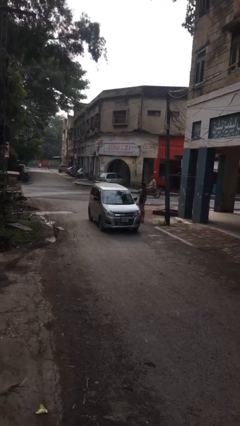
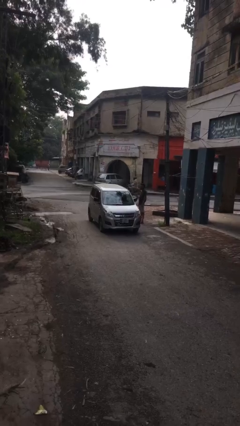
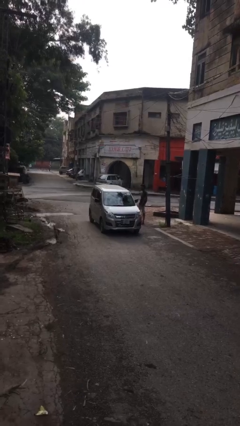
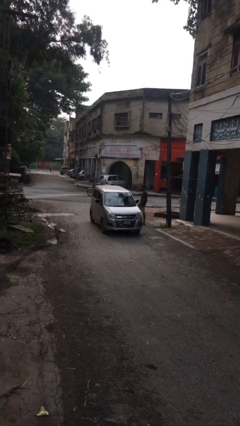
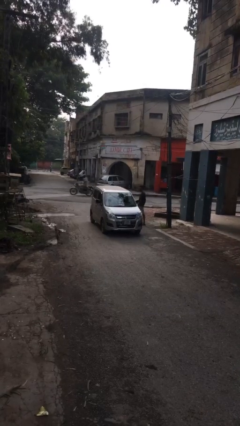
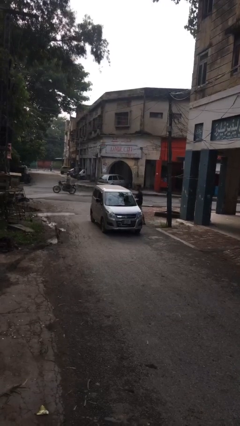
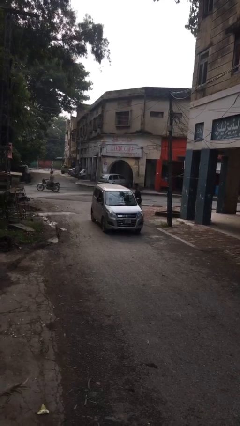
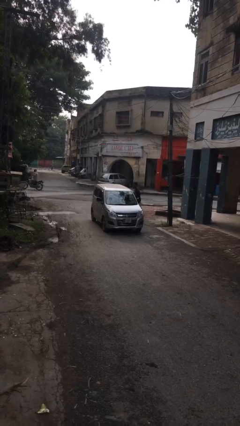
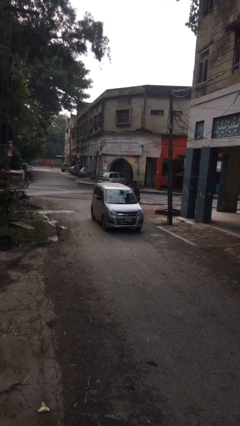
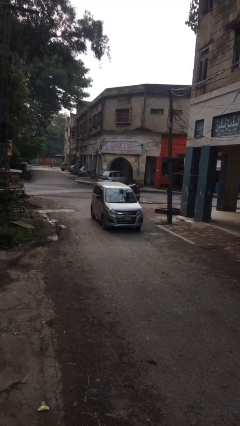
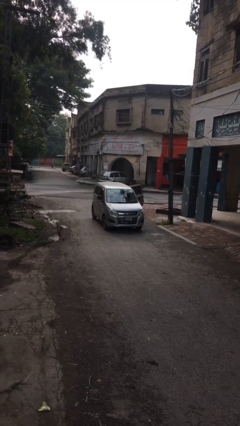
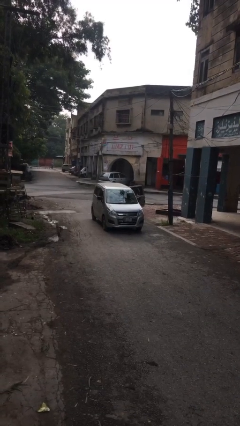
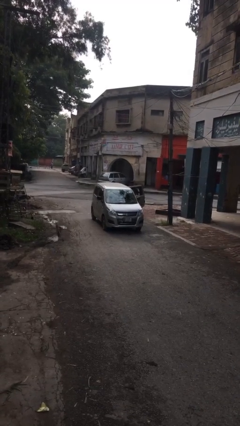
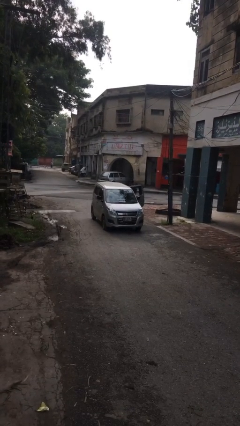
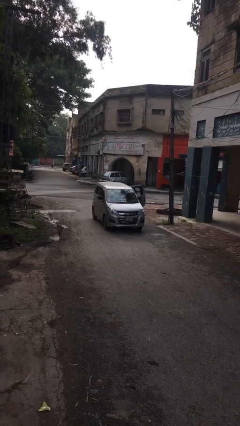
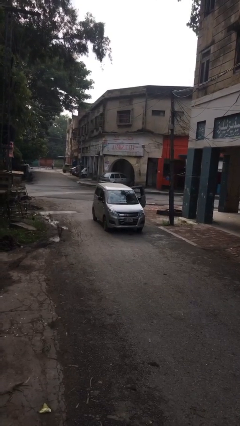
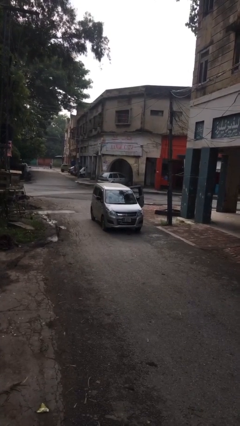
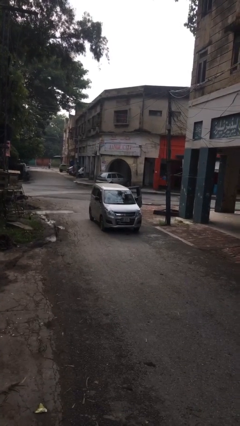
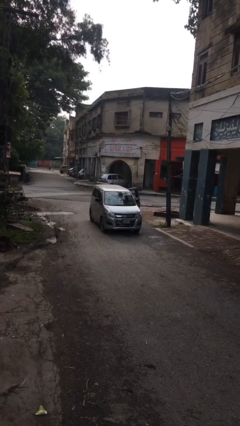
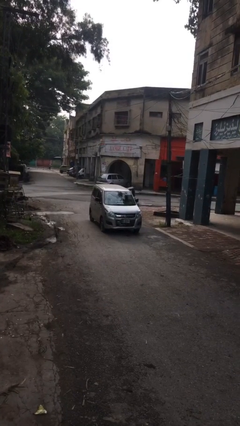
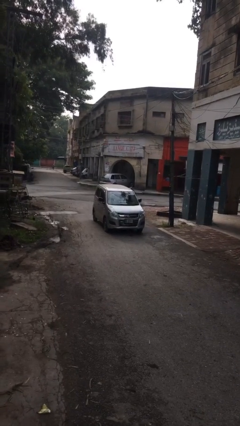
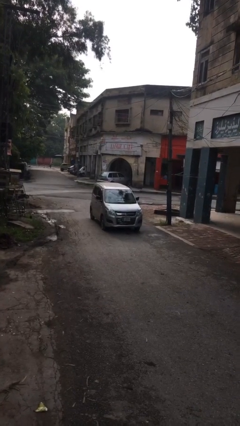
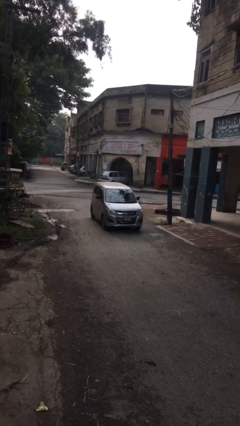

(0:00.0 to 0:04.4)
car picks up person

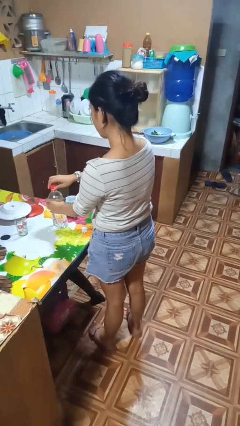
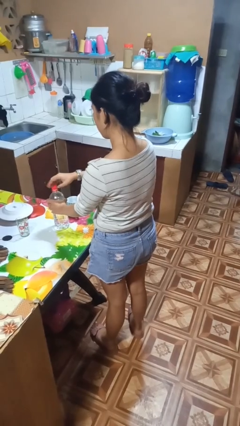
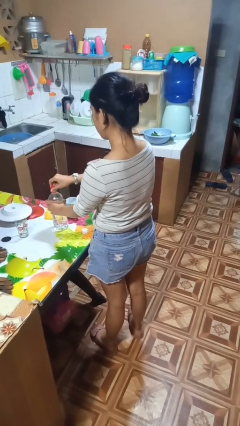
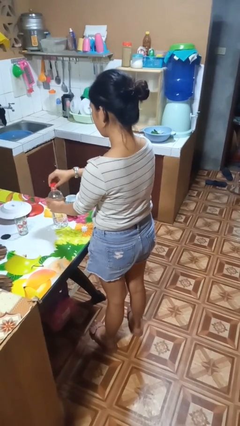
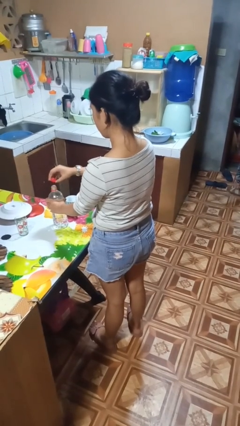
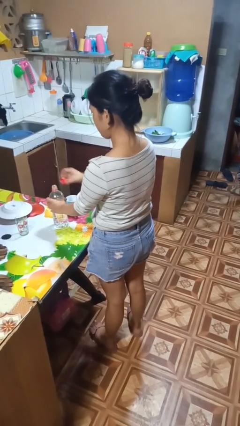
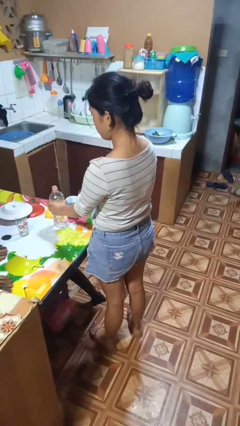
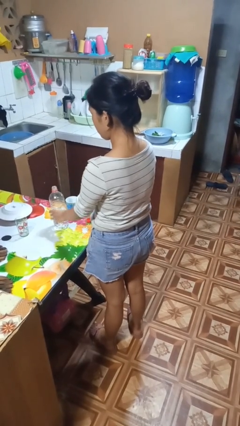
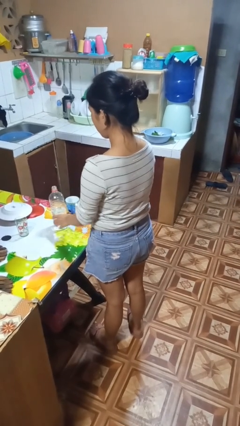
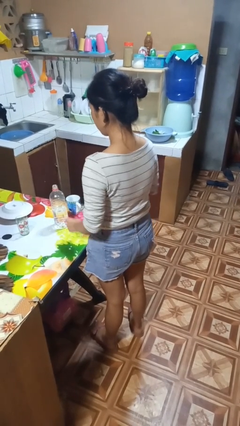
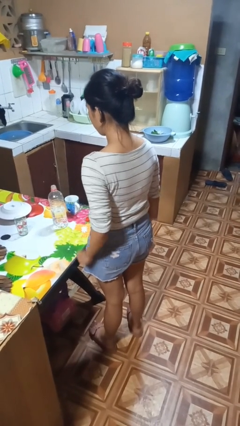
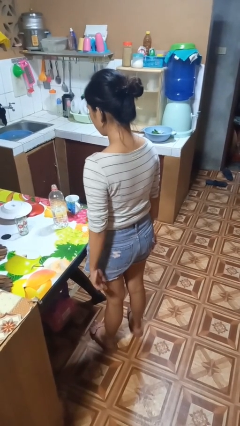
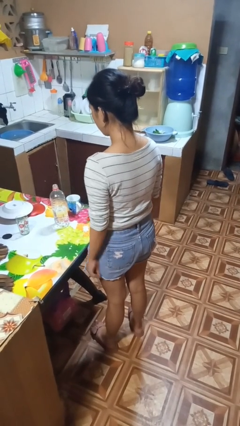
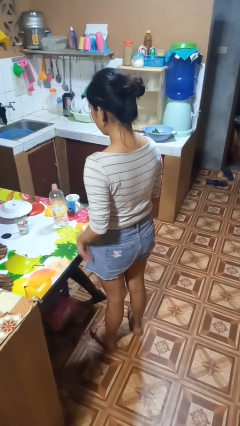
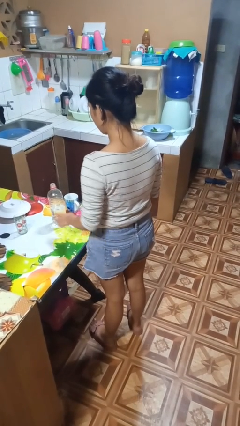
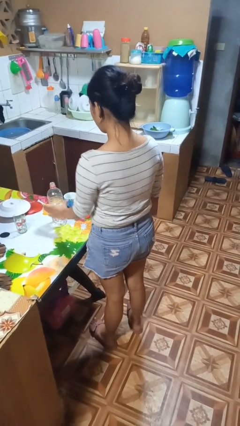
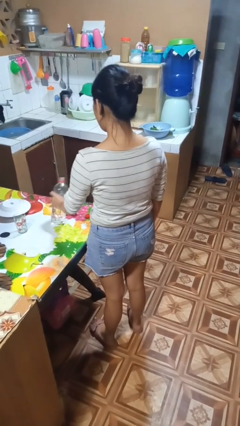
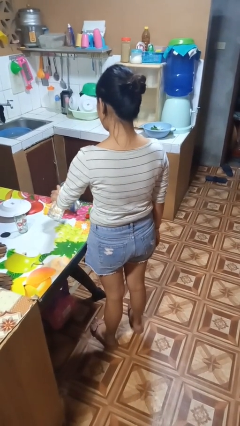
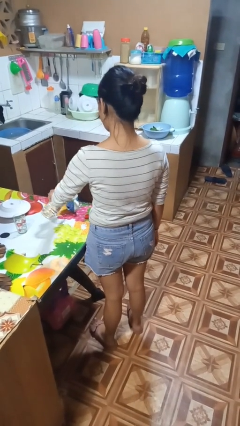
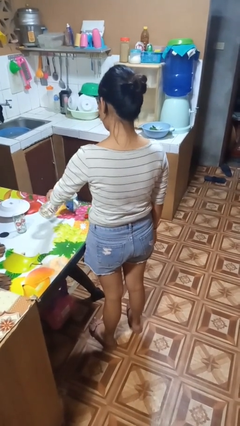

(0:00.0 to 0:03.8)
person unscrews lid from bottle

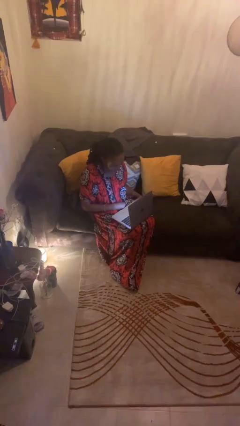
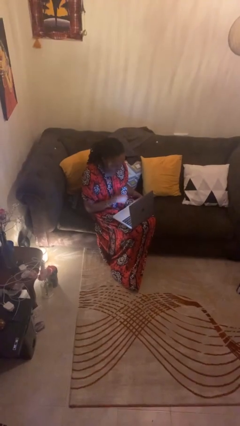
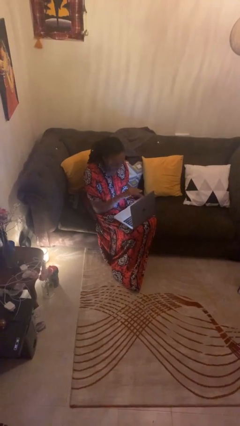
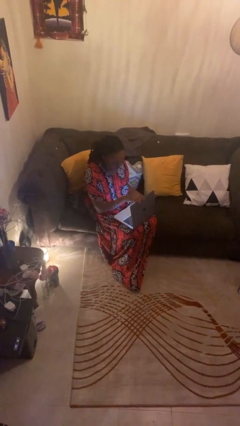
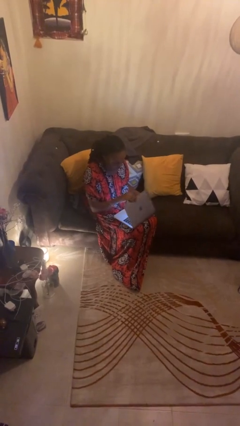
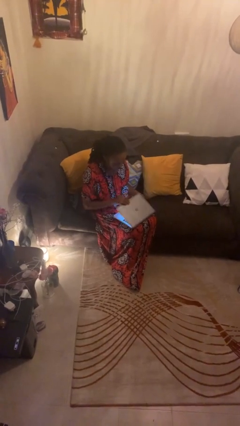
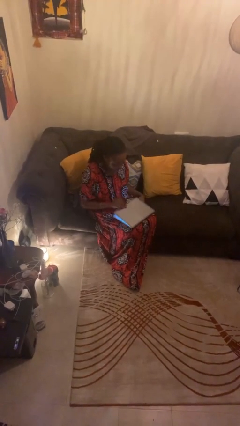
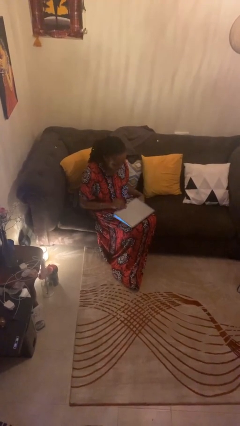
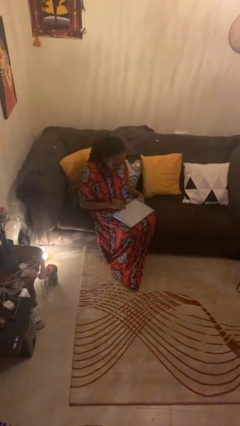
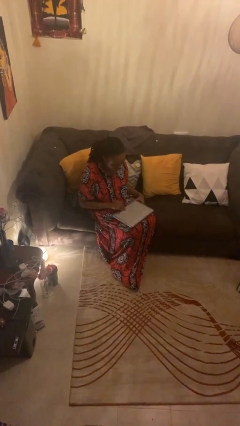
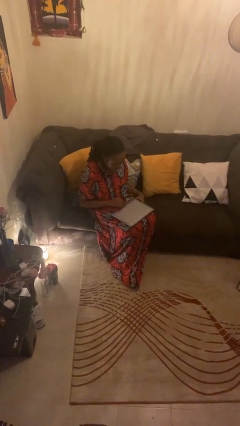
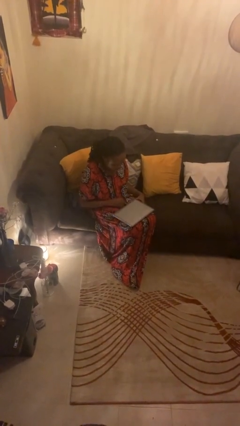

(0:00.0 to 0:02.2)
person closes laptop

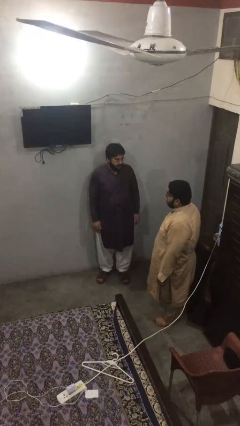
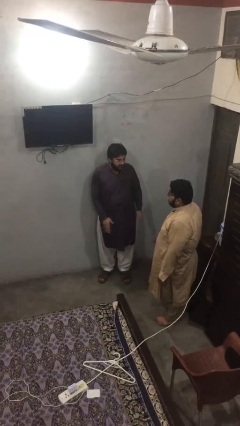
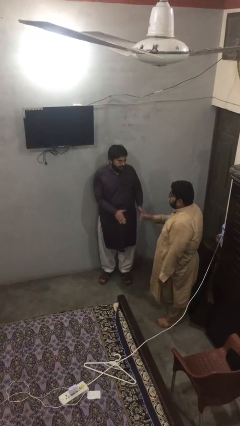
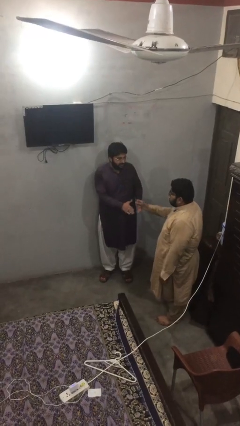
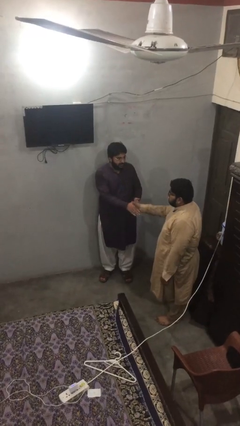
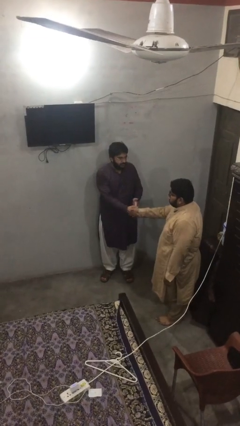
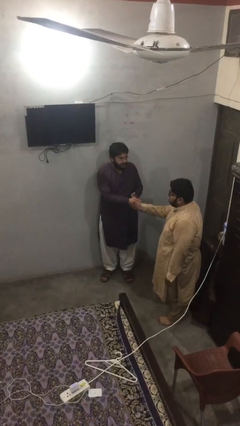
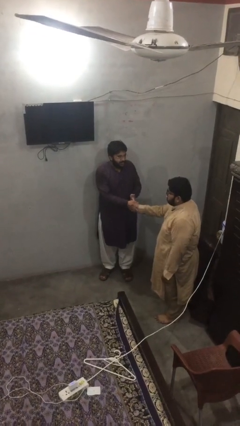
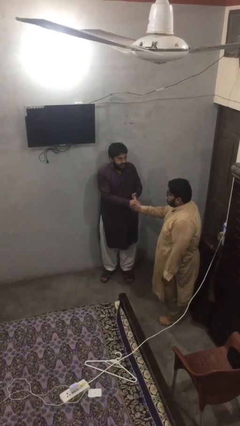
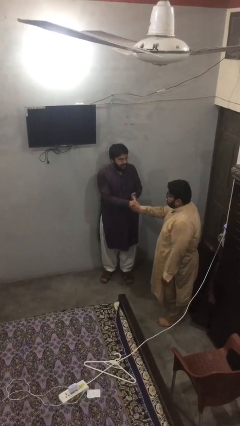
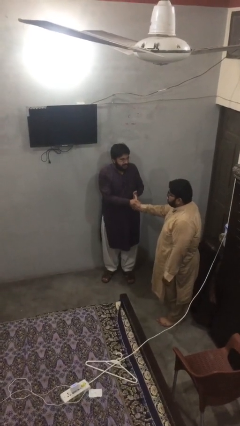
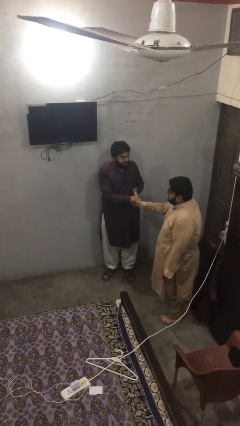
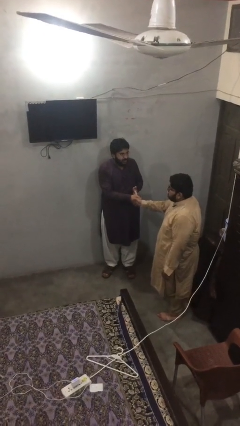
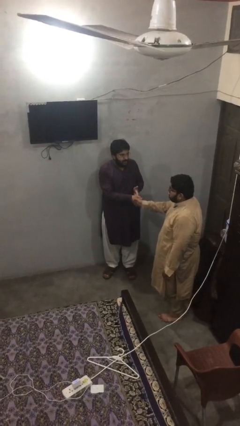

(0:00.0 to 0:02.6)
person shakes hand

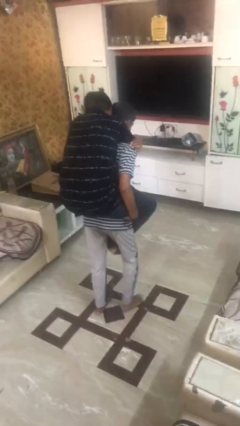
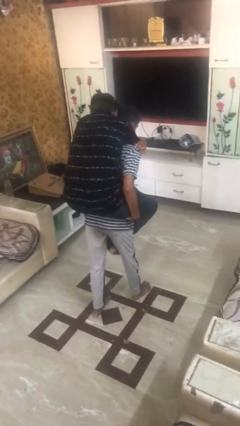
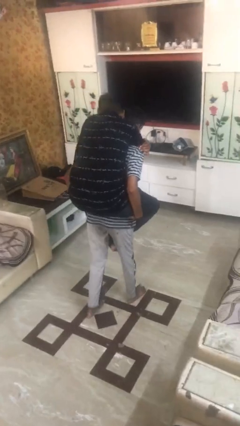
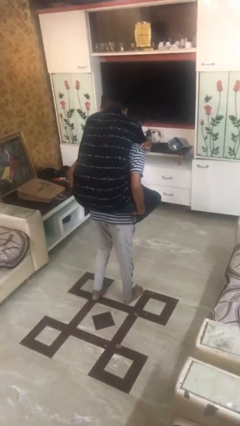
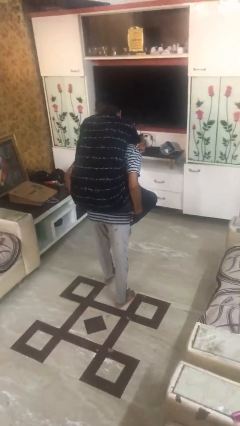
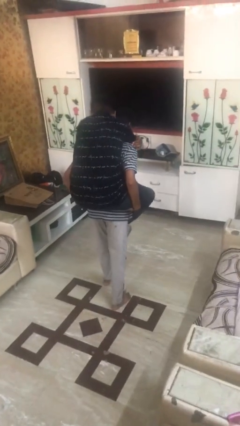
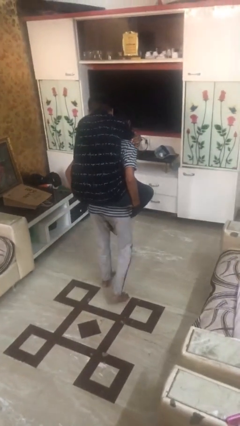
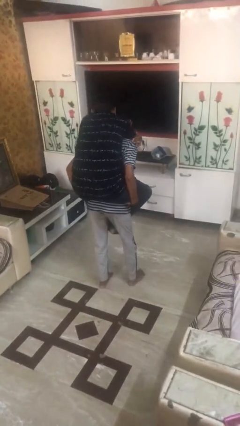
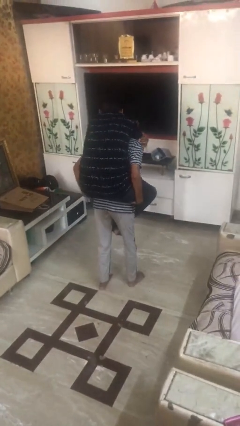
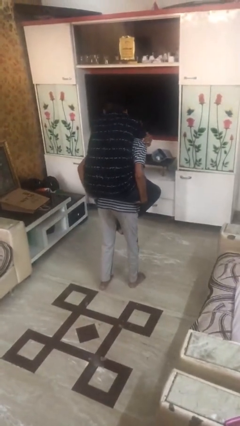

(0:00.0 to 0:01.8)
person carries person on back

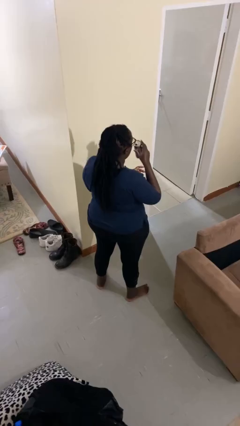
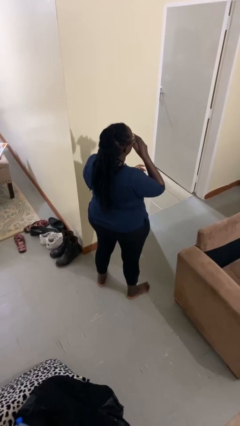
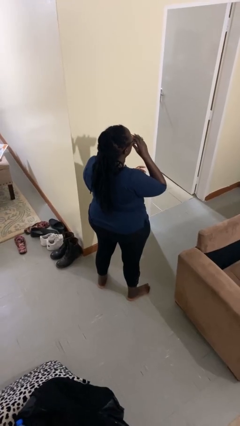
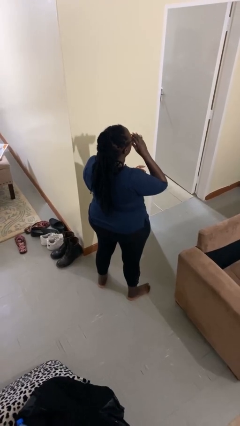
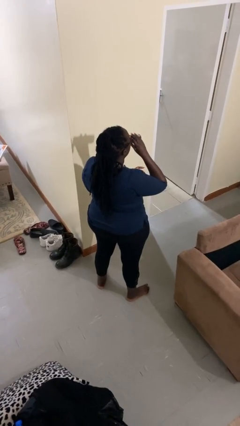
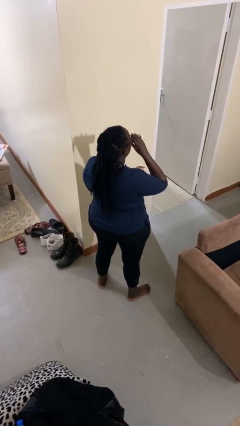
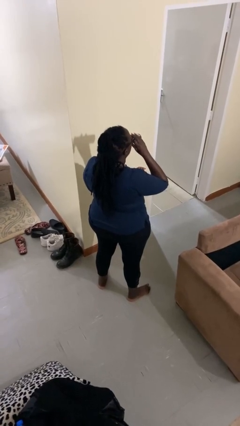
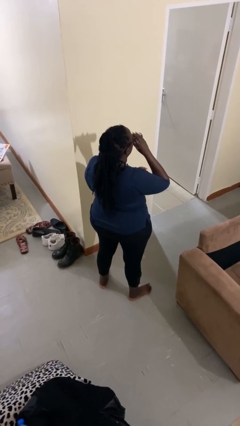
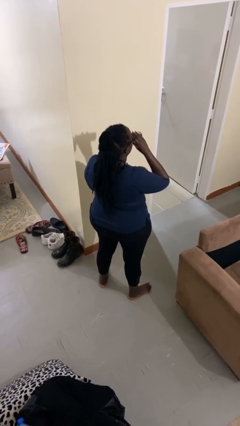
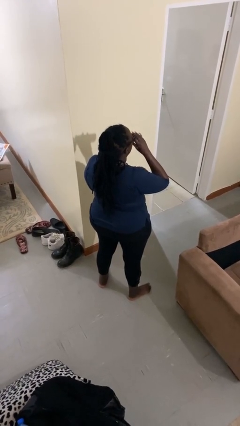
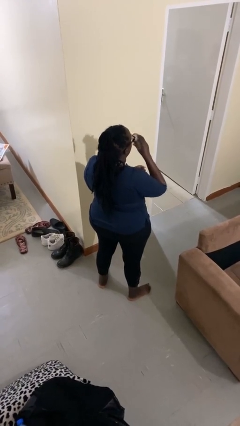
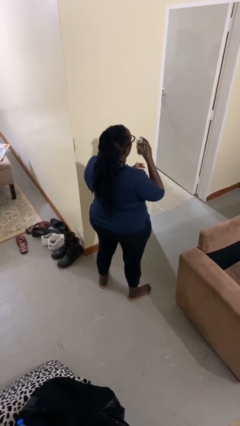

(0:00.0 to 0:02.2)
person drinks from beverage can

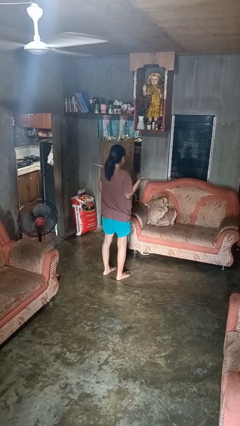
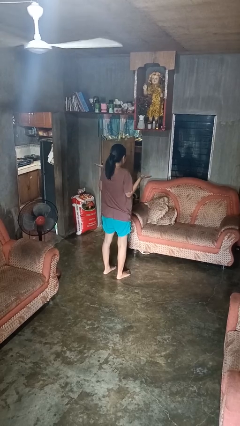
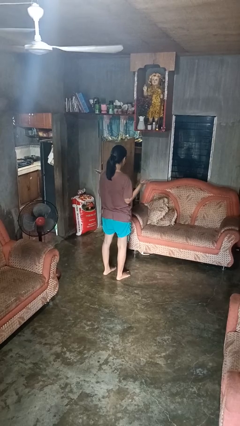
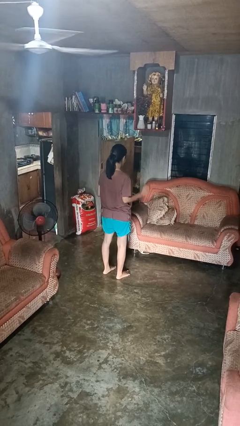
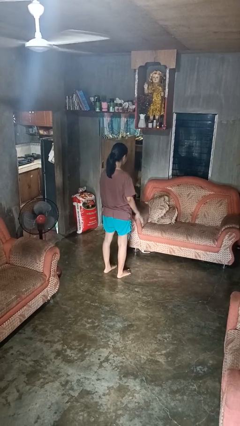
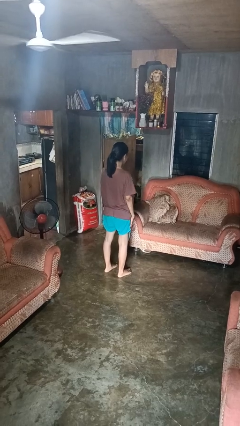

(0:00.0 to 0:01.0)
person shrugs
